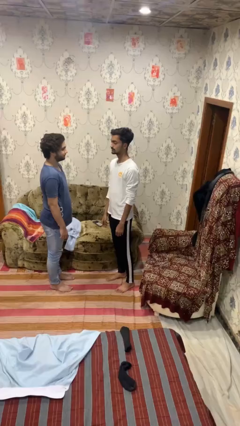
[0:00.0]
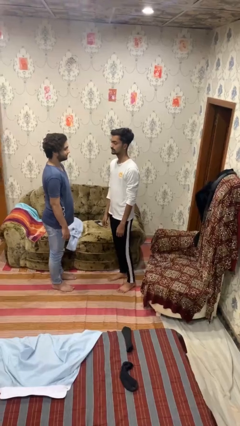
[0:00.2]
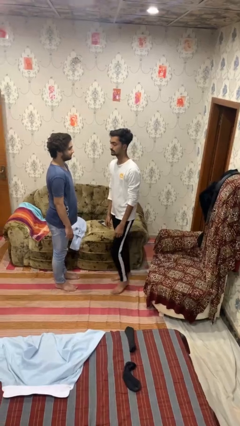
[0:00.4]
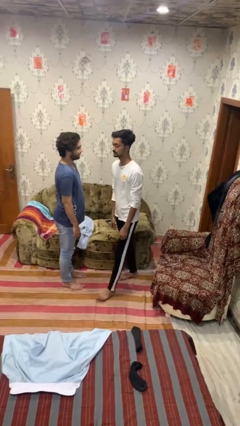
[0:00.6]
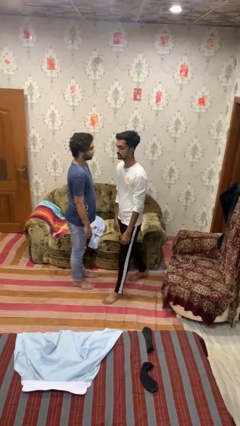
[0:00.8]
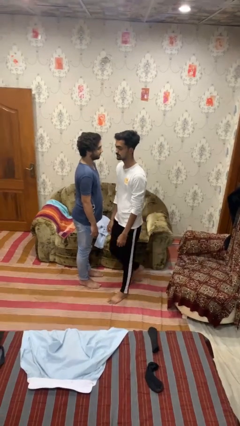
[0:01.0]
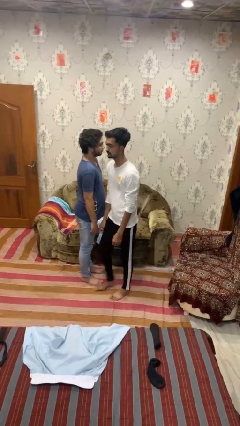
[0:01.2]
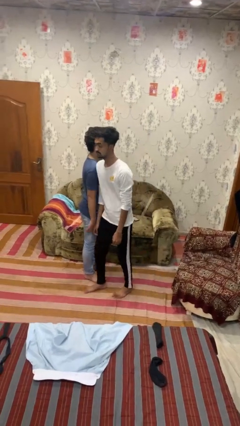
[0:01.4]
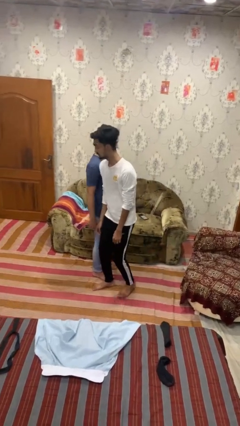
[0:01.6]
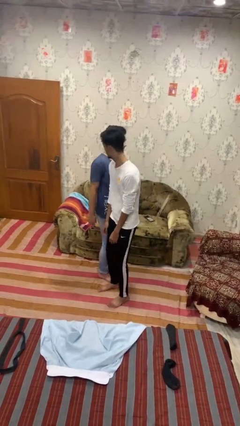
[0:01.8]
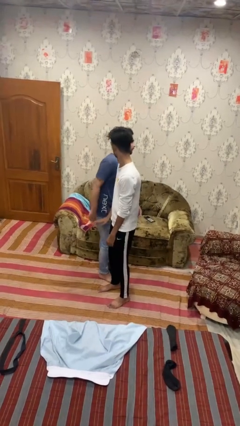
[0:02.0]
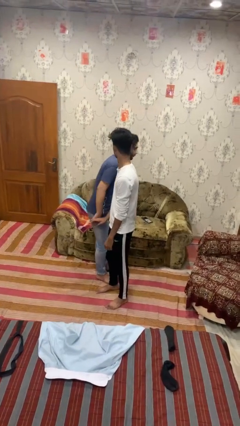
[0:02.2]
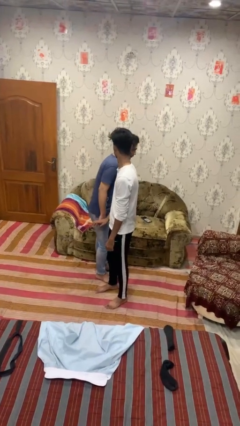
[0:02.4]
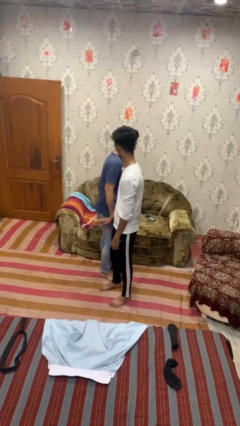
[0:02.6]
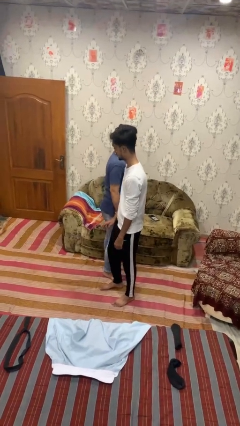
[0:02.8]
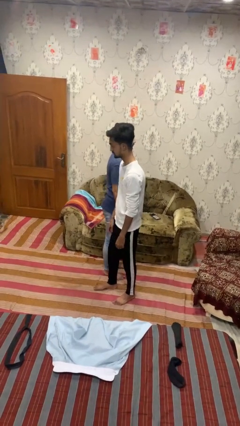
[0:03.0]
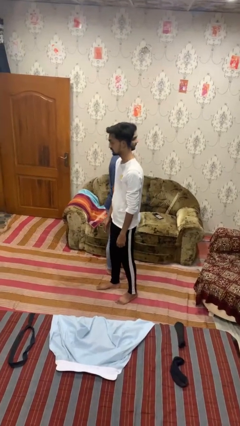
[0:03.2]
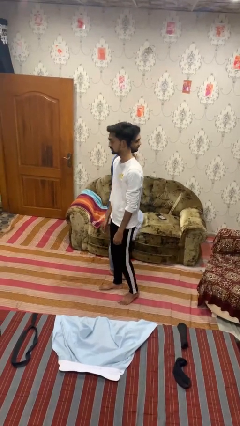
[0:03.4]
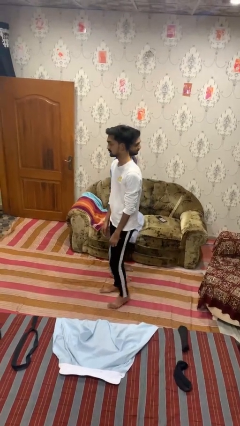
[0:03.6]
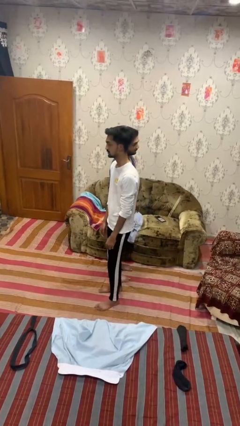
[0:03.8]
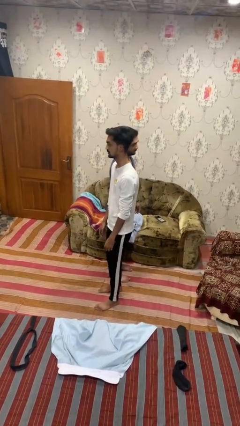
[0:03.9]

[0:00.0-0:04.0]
person bumps into person

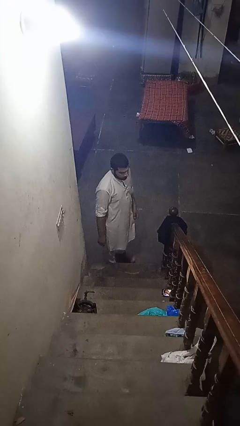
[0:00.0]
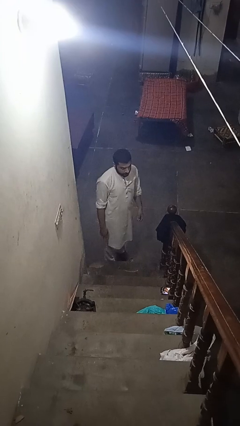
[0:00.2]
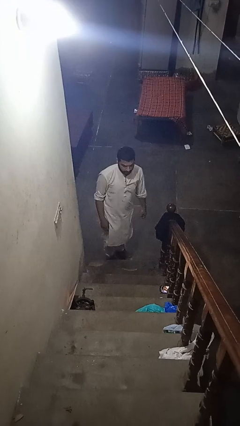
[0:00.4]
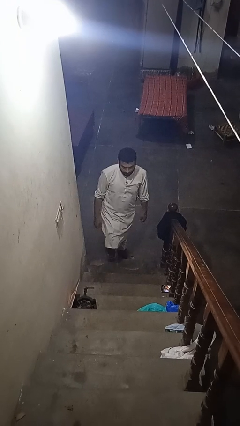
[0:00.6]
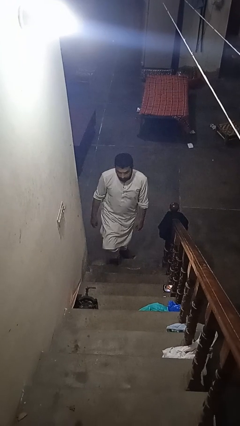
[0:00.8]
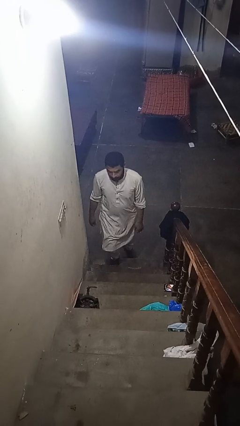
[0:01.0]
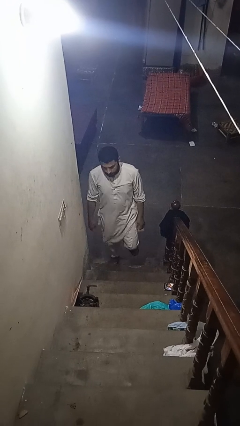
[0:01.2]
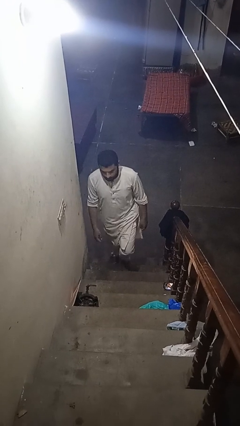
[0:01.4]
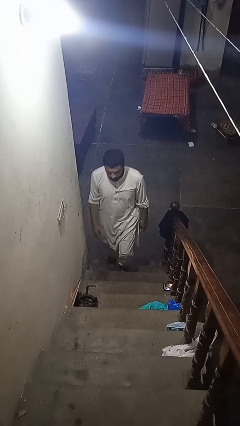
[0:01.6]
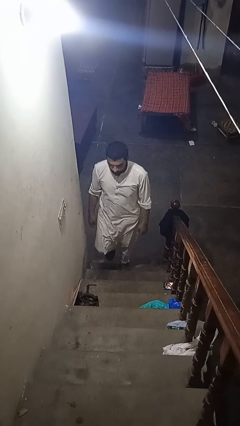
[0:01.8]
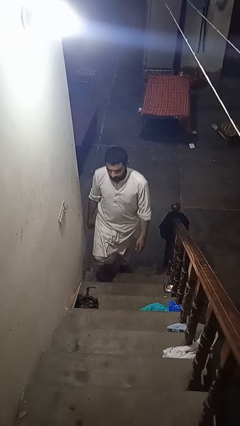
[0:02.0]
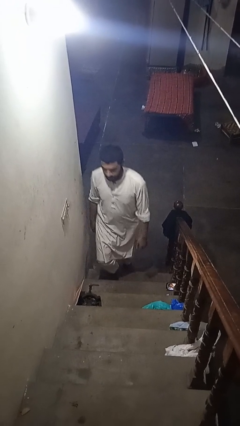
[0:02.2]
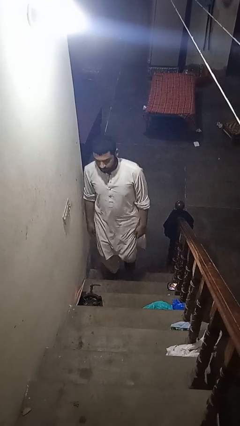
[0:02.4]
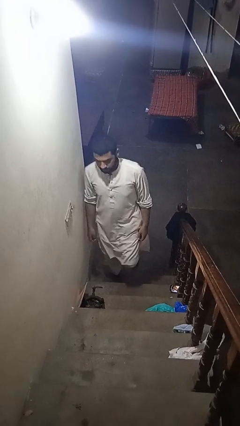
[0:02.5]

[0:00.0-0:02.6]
person climbs up stairs

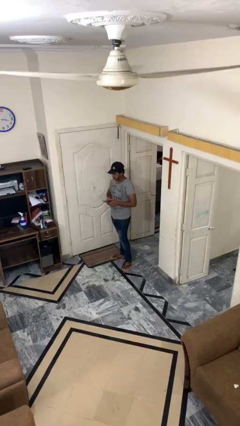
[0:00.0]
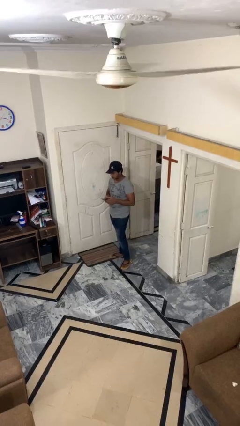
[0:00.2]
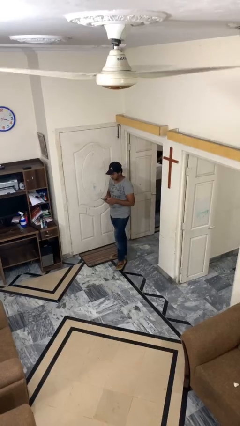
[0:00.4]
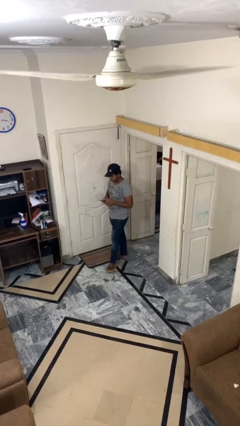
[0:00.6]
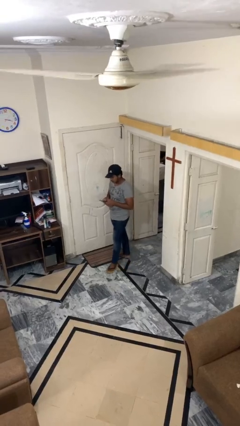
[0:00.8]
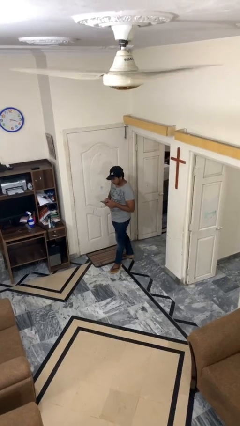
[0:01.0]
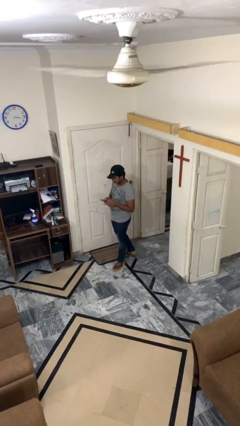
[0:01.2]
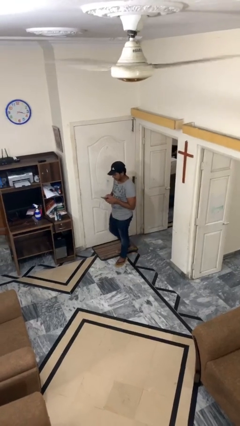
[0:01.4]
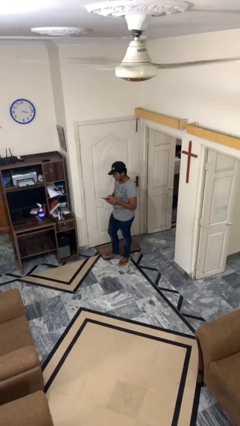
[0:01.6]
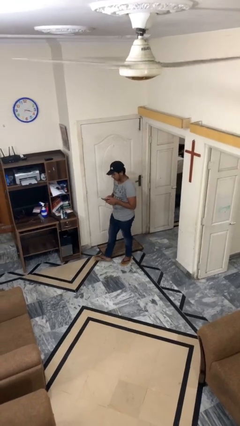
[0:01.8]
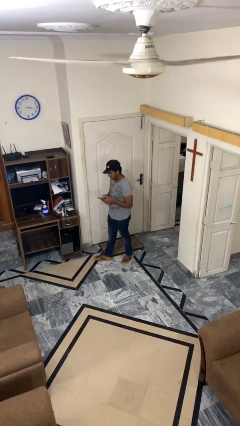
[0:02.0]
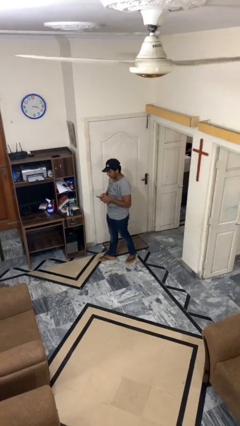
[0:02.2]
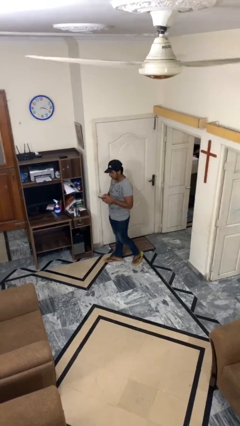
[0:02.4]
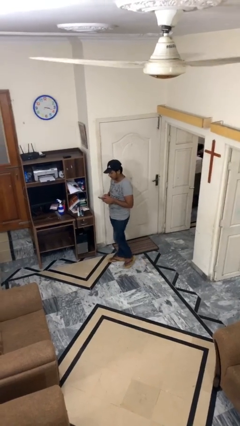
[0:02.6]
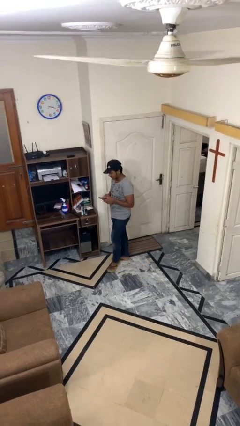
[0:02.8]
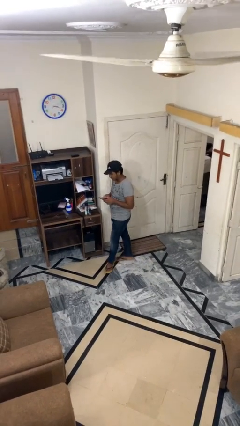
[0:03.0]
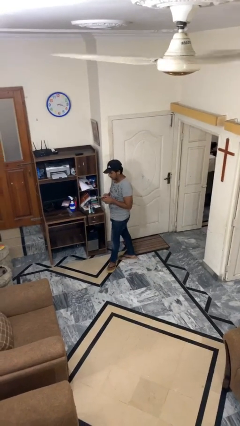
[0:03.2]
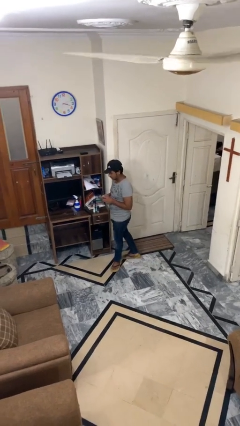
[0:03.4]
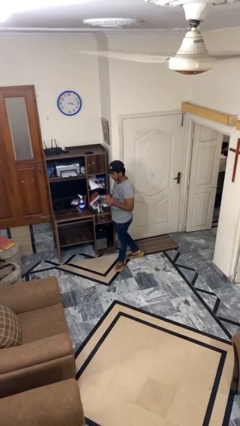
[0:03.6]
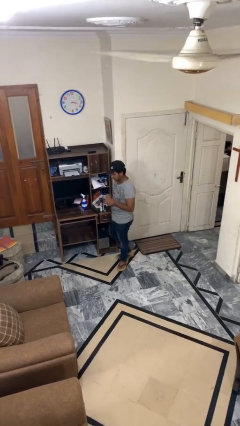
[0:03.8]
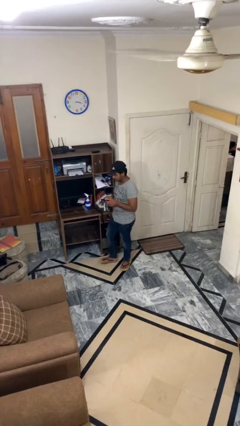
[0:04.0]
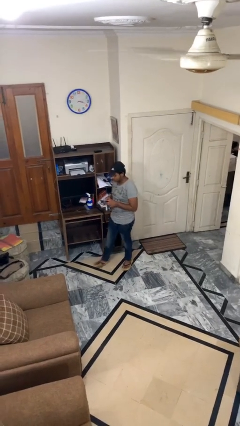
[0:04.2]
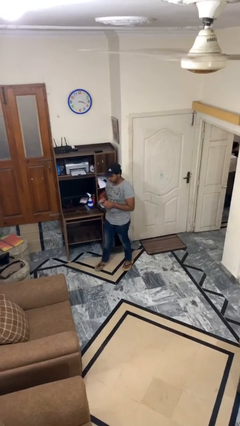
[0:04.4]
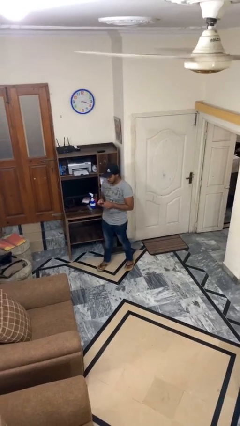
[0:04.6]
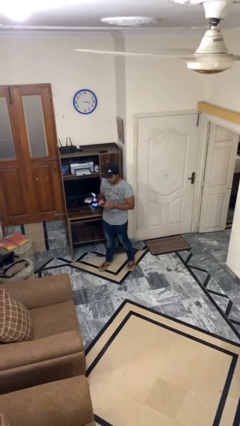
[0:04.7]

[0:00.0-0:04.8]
person texts on phone

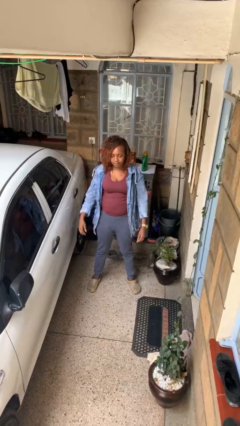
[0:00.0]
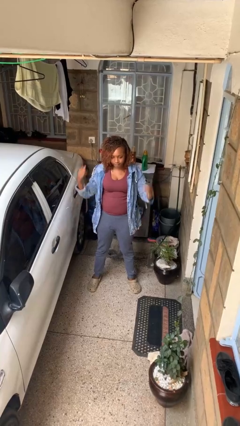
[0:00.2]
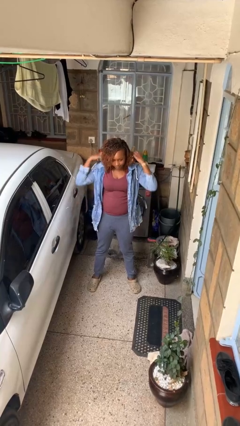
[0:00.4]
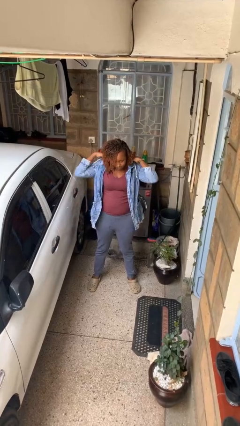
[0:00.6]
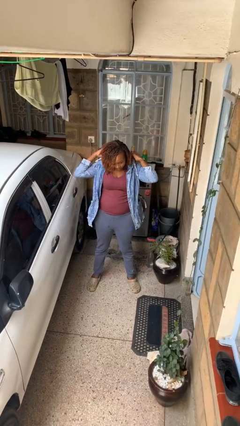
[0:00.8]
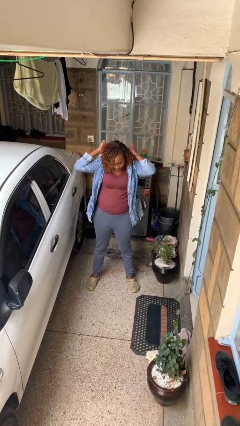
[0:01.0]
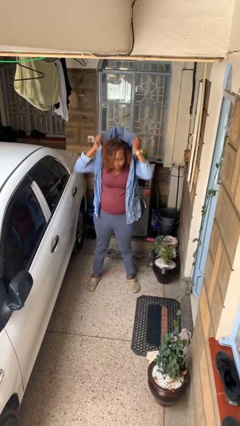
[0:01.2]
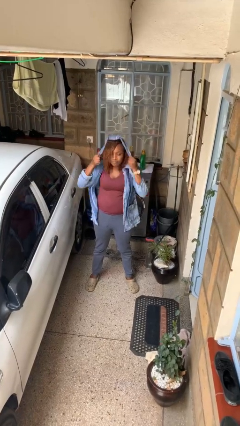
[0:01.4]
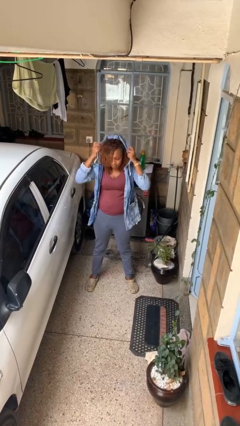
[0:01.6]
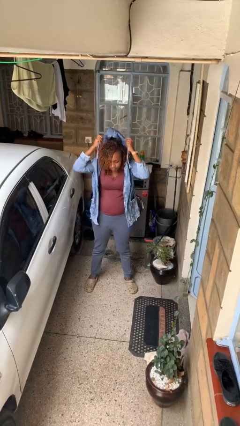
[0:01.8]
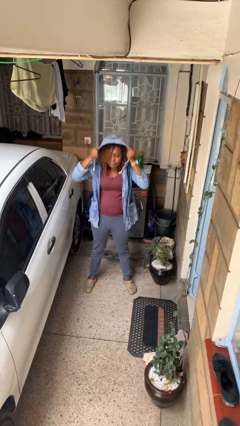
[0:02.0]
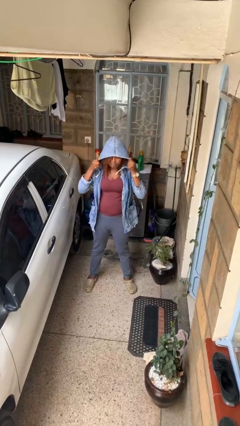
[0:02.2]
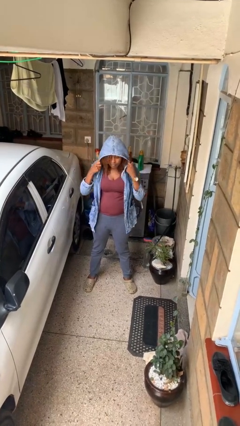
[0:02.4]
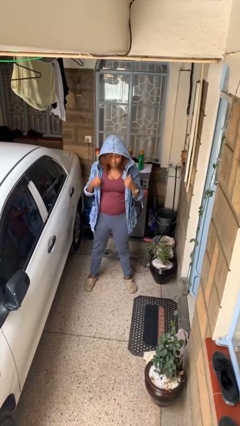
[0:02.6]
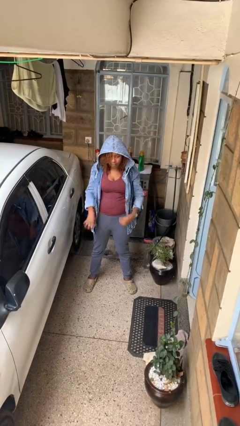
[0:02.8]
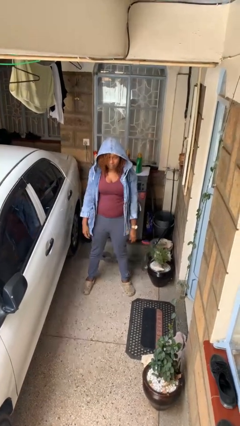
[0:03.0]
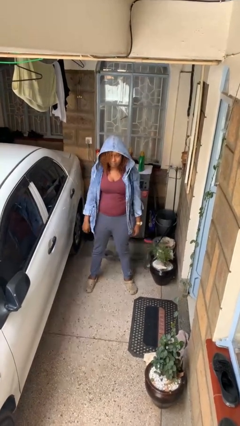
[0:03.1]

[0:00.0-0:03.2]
person puts on hoodie

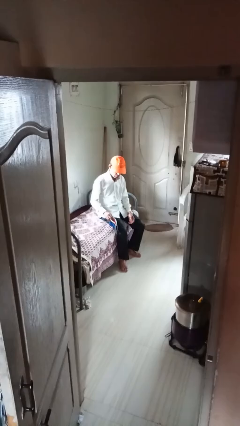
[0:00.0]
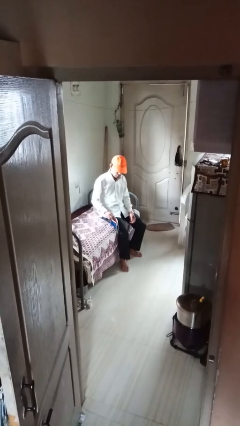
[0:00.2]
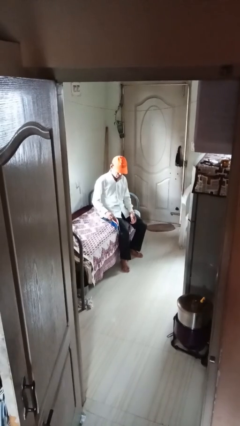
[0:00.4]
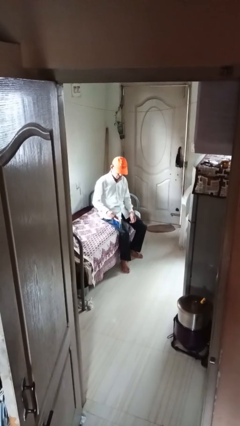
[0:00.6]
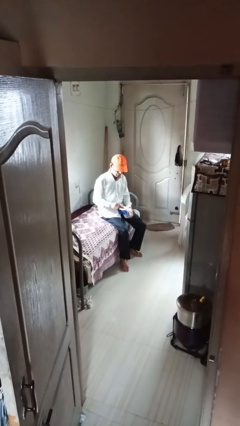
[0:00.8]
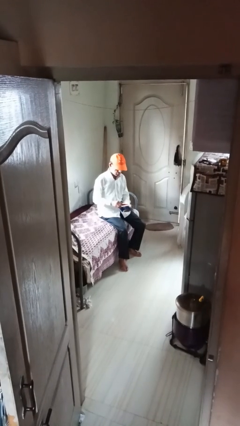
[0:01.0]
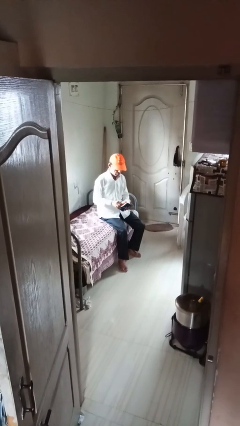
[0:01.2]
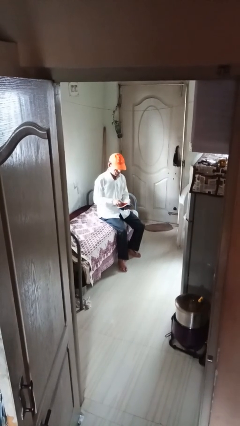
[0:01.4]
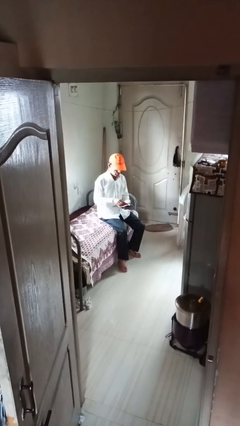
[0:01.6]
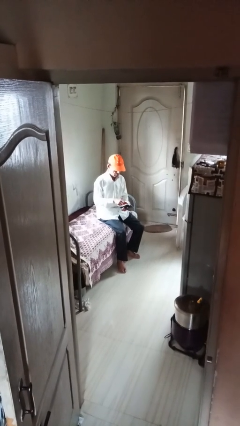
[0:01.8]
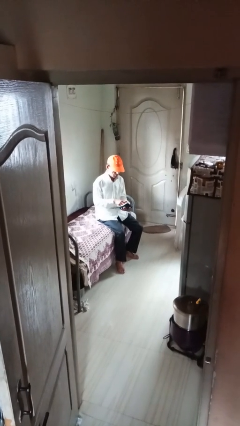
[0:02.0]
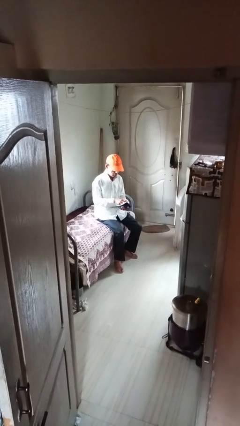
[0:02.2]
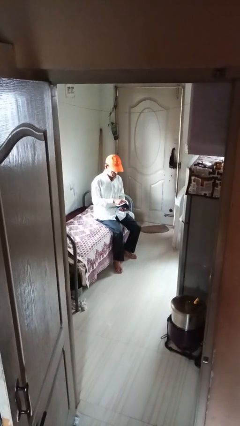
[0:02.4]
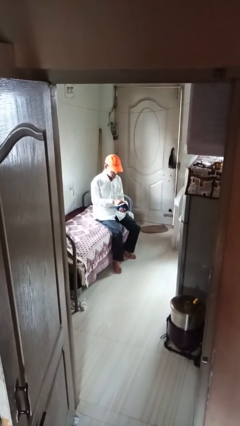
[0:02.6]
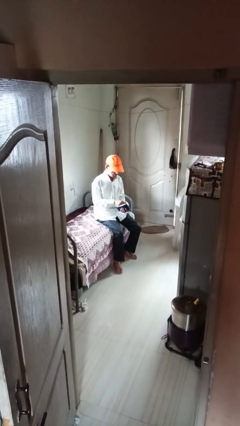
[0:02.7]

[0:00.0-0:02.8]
person searches in purse

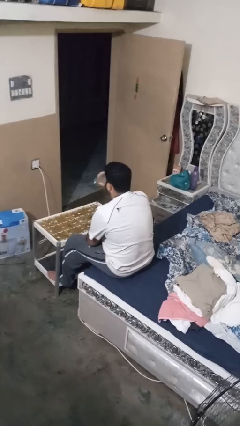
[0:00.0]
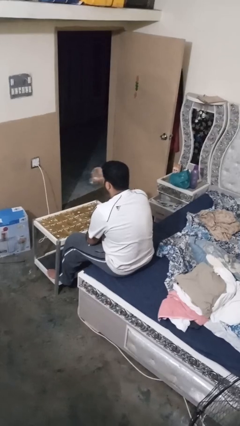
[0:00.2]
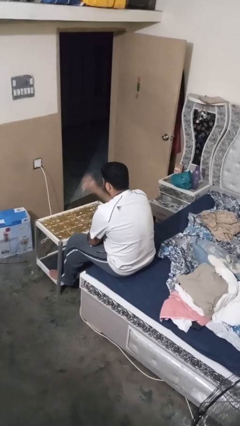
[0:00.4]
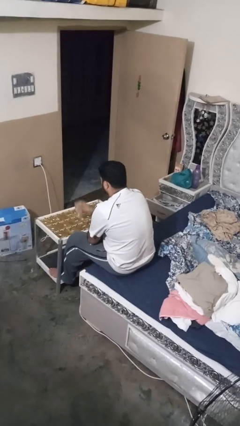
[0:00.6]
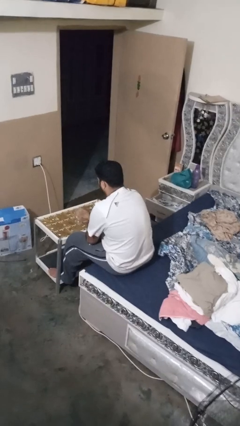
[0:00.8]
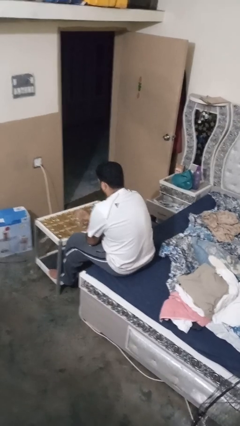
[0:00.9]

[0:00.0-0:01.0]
person puts down object on table
